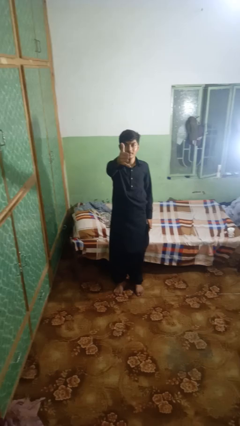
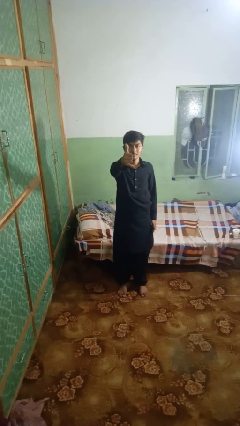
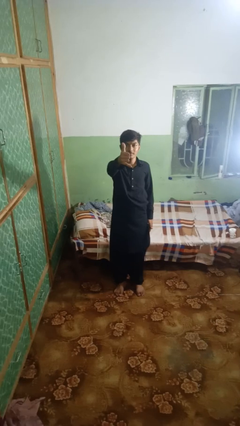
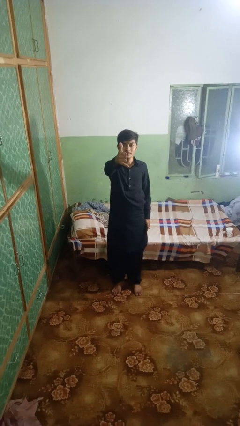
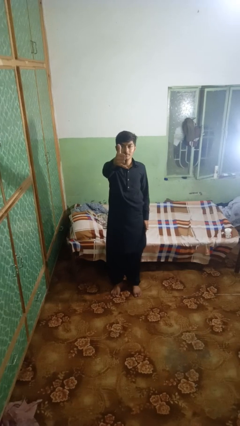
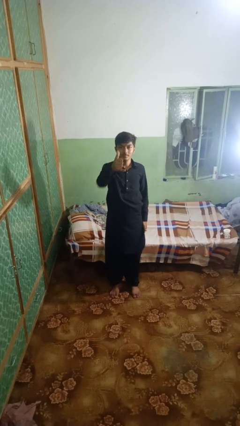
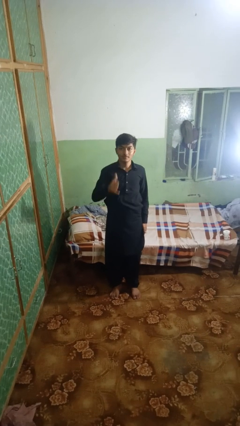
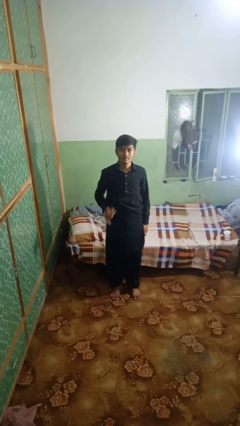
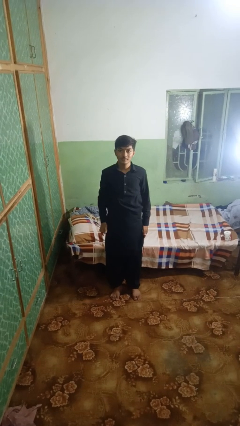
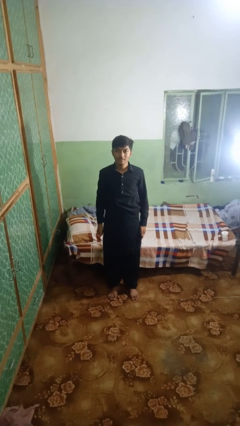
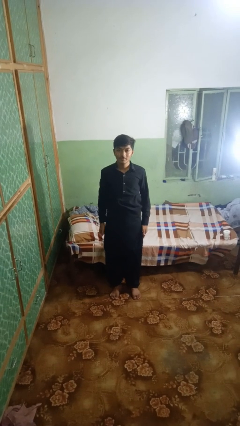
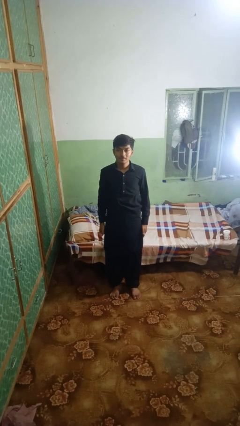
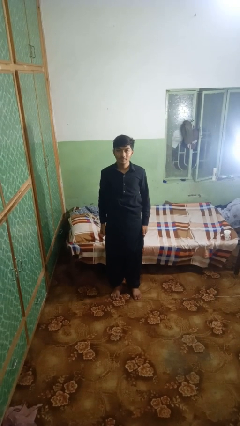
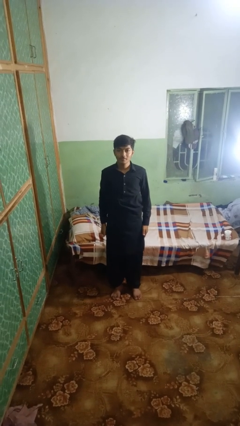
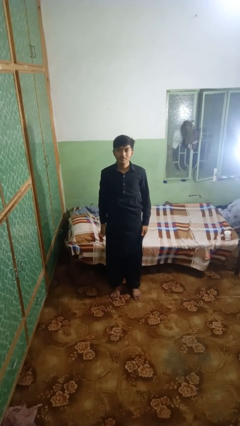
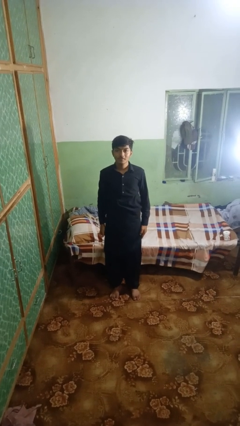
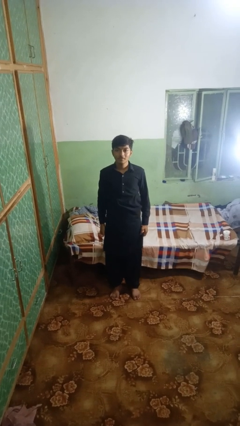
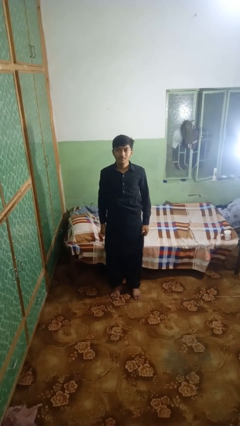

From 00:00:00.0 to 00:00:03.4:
person gestures hang loose

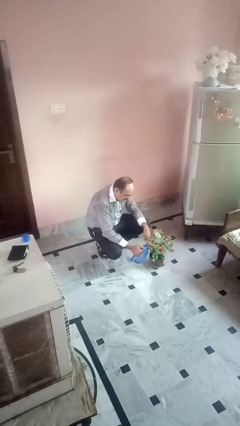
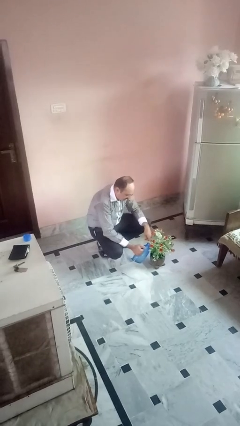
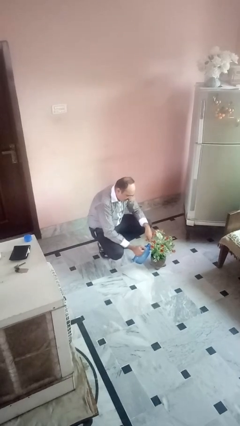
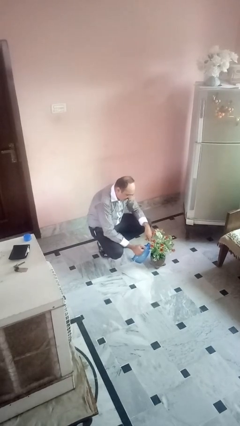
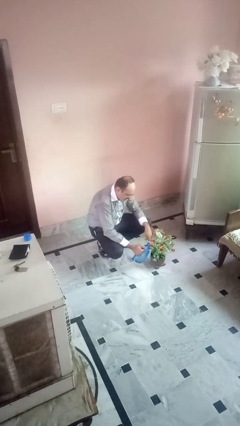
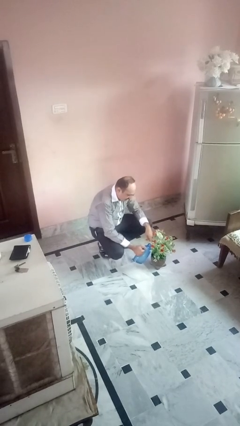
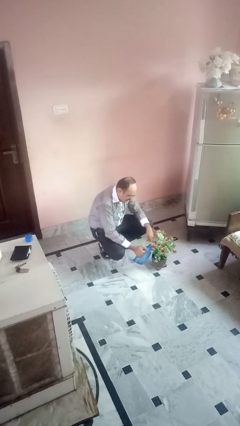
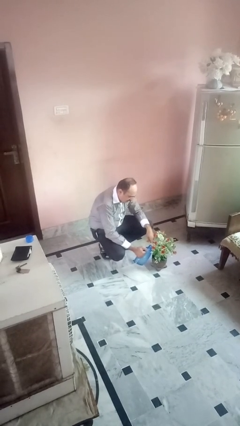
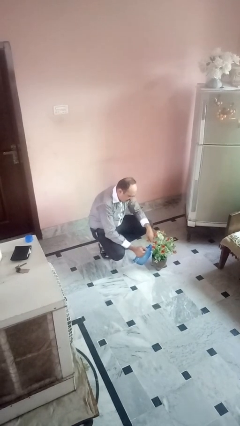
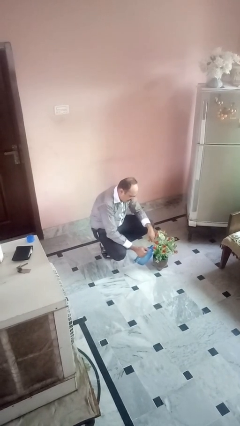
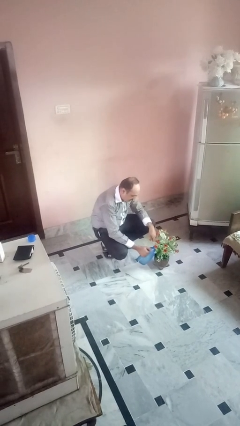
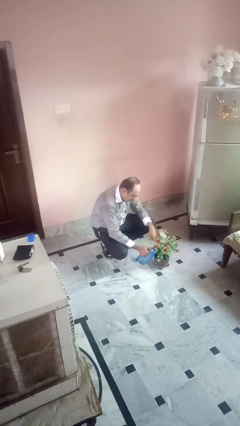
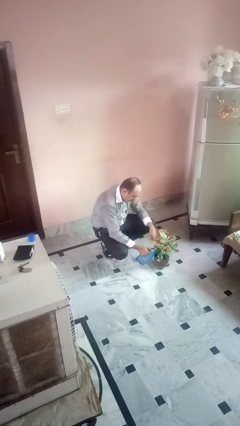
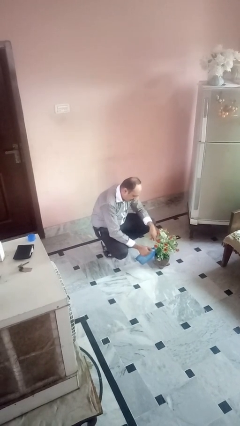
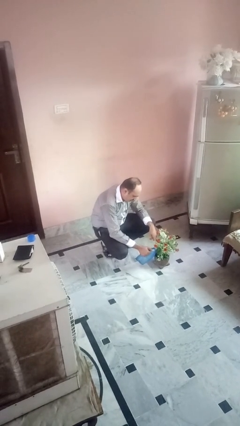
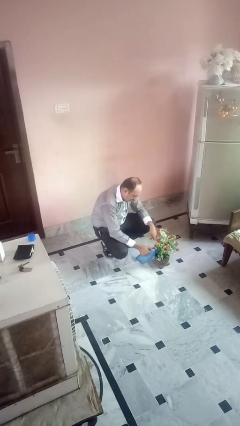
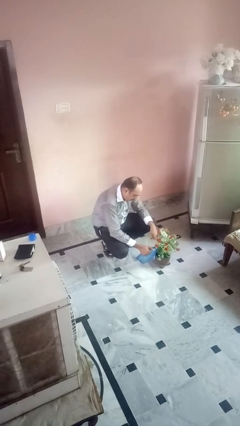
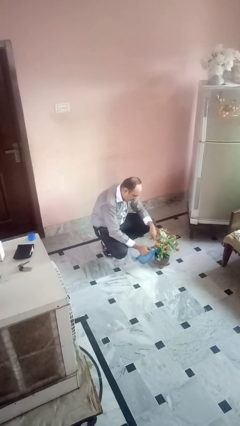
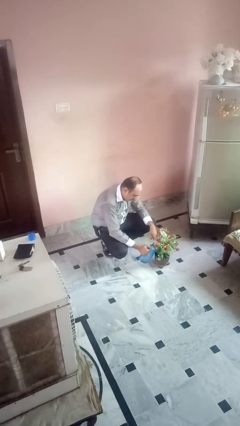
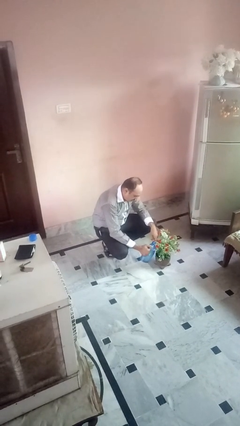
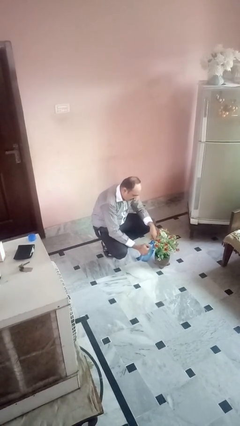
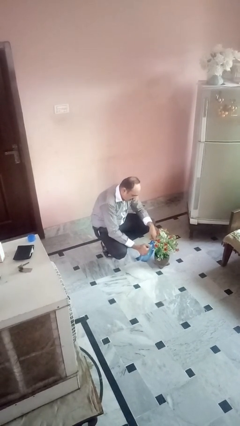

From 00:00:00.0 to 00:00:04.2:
person waters houseplant

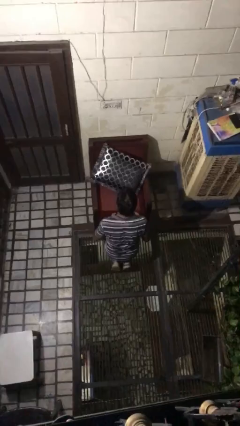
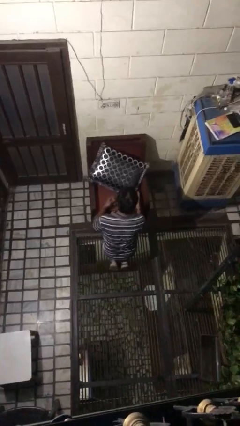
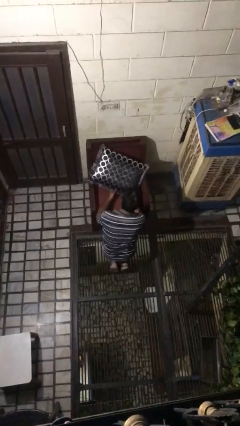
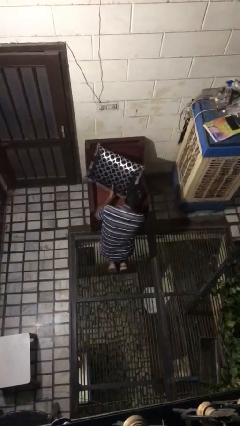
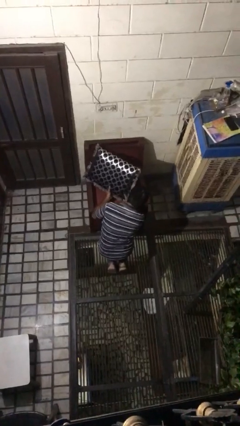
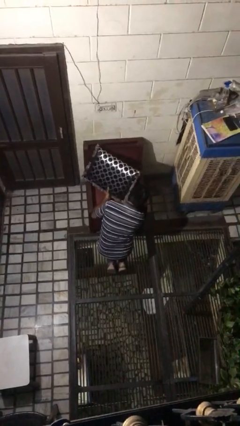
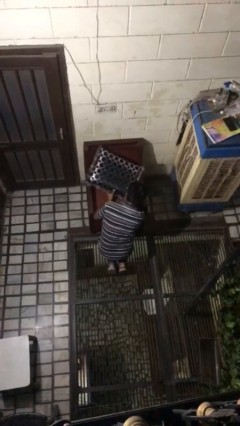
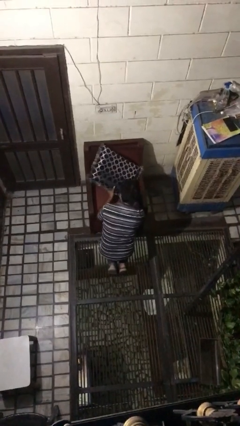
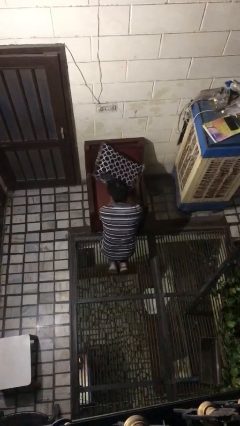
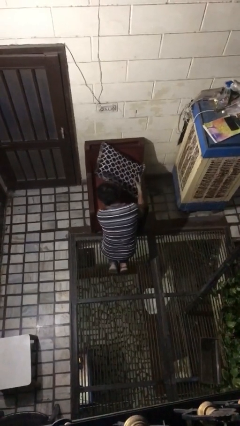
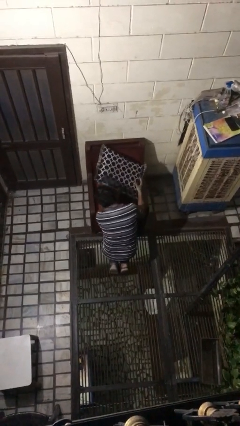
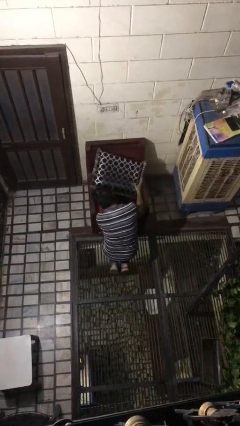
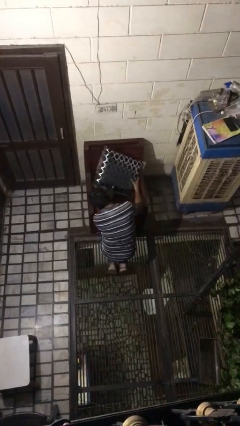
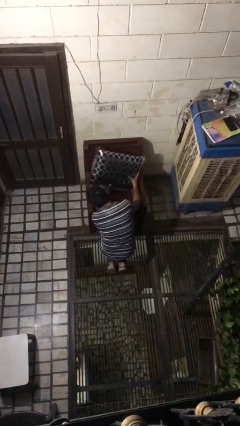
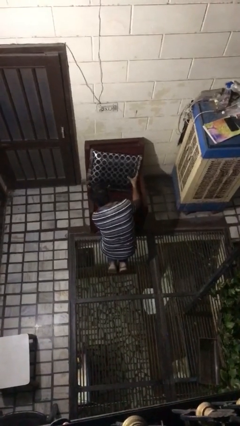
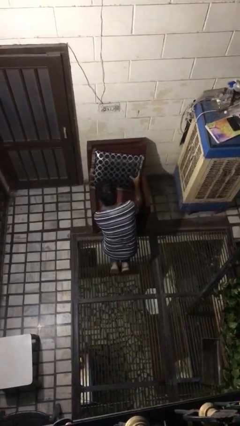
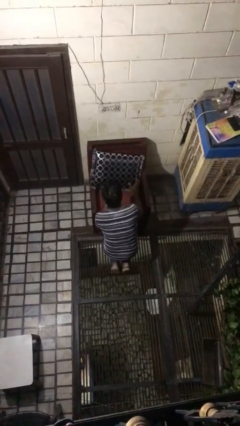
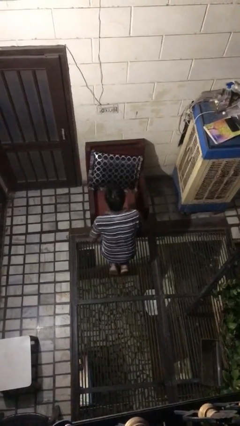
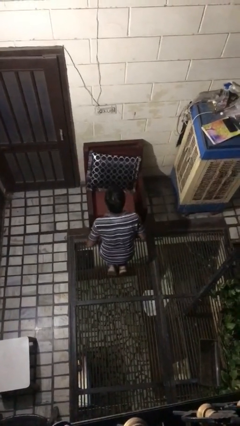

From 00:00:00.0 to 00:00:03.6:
person searches in couch

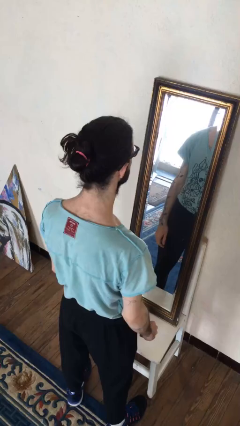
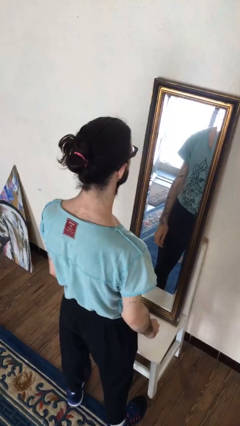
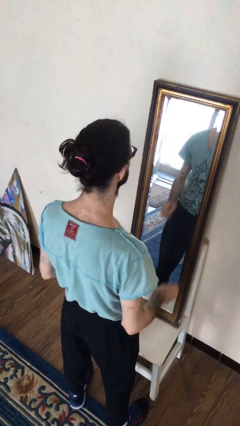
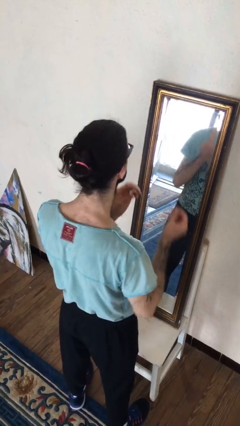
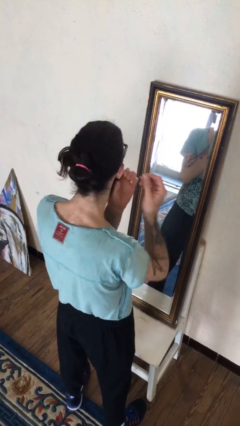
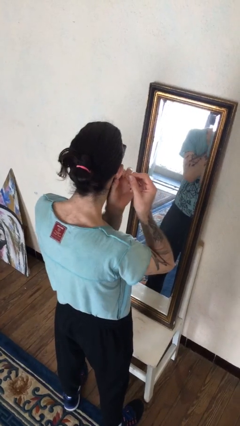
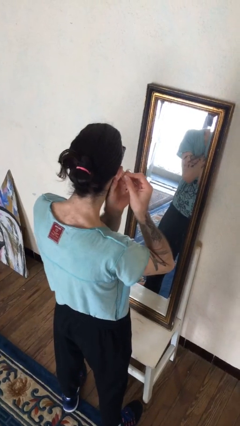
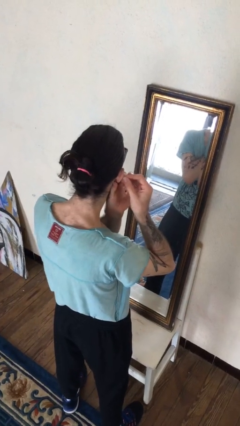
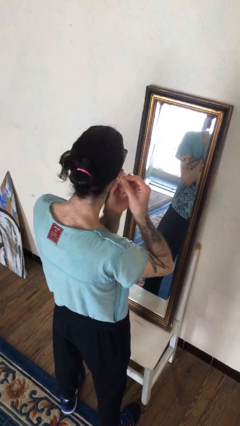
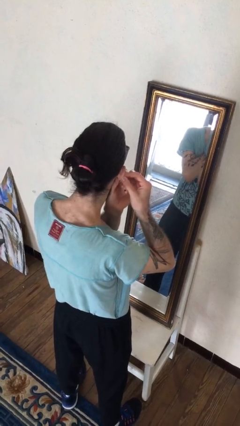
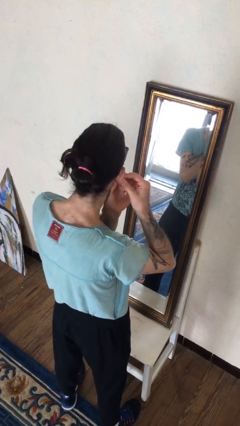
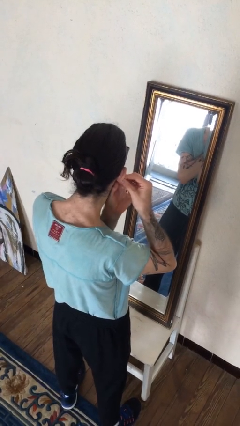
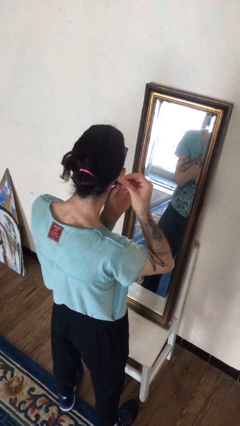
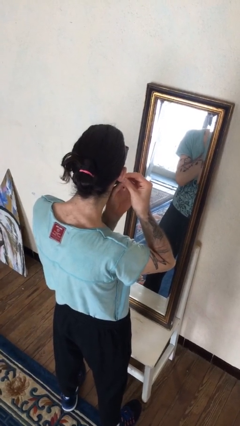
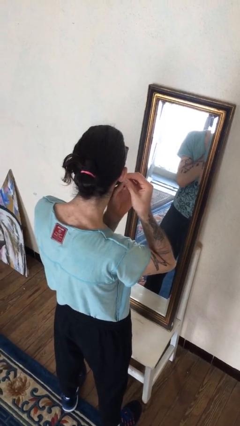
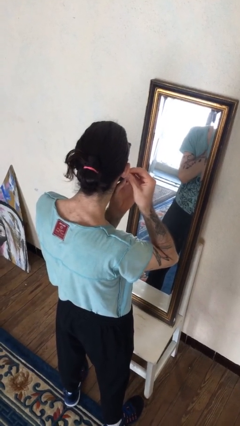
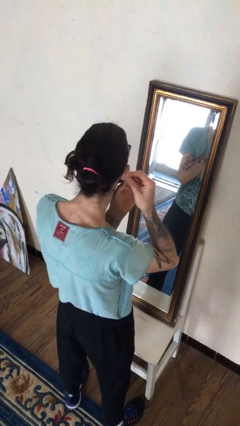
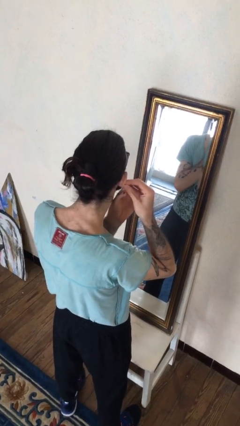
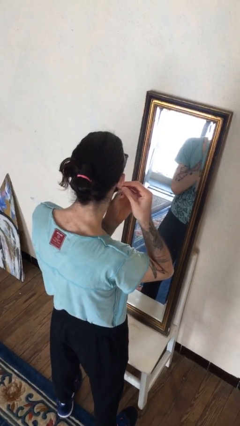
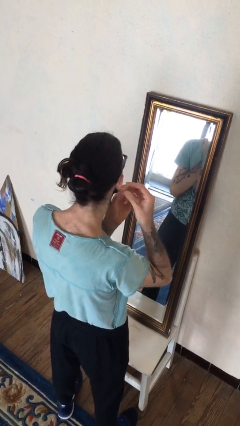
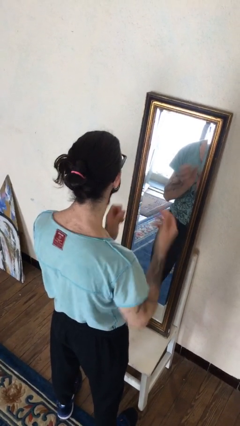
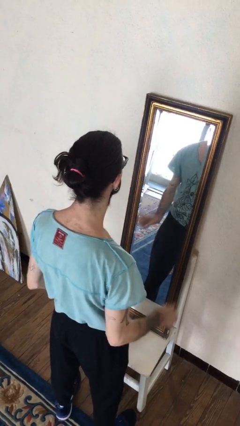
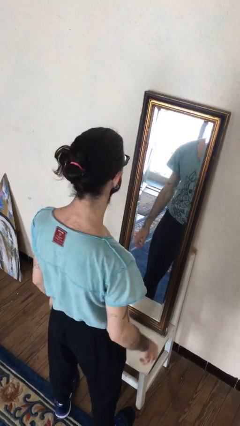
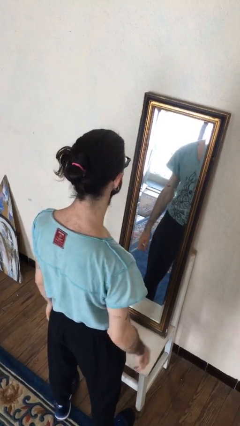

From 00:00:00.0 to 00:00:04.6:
person puts on earrings

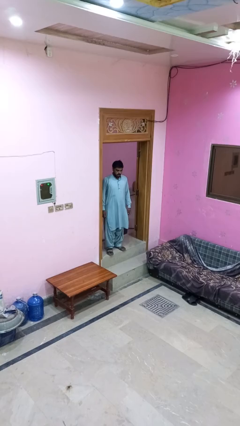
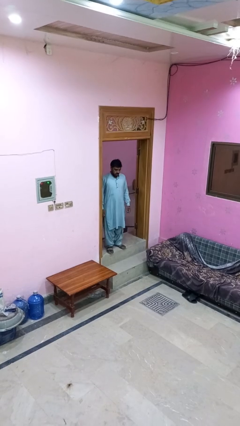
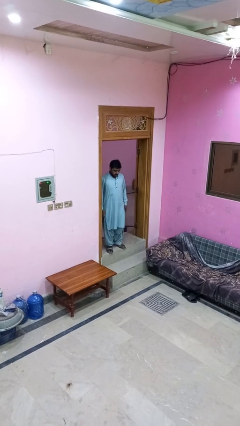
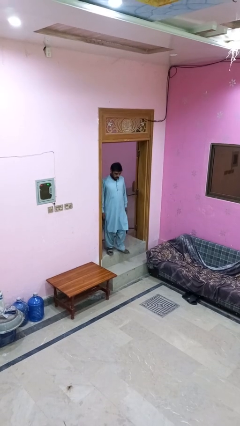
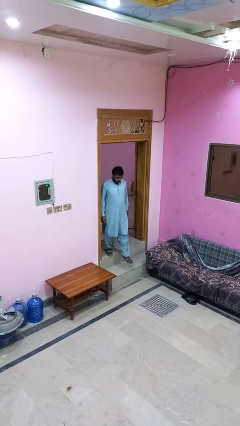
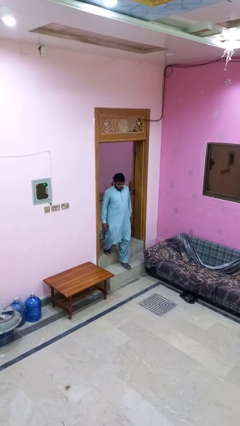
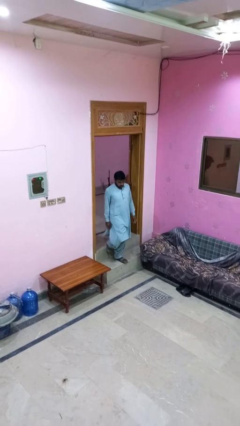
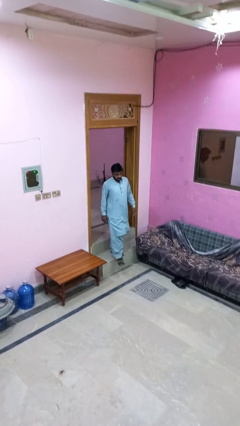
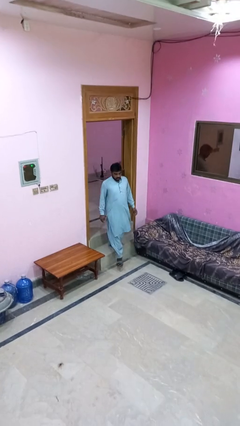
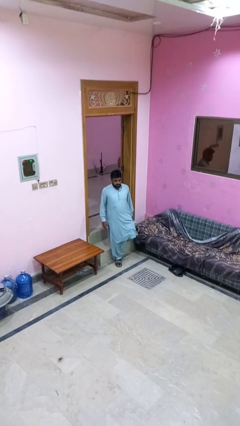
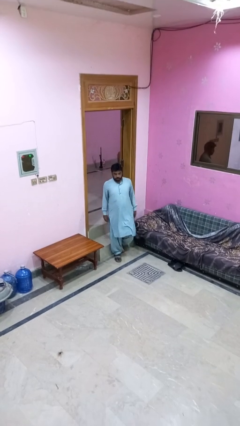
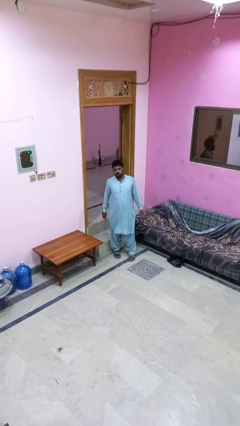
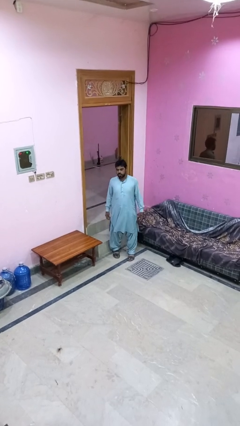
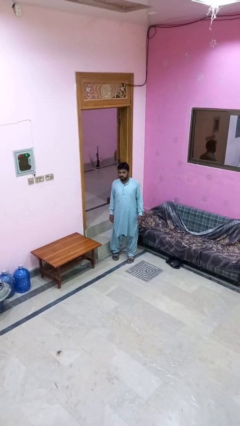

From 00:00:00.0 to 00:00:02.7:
person climbs down stairs
